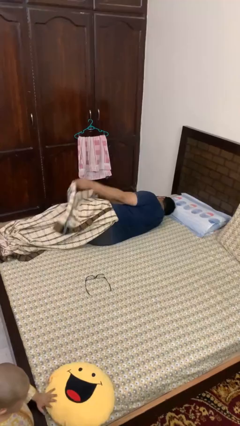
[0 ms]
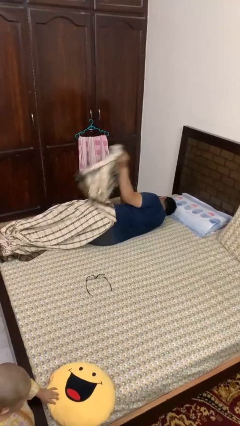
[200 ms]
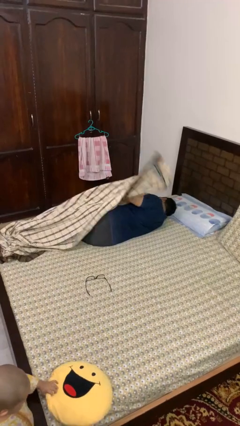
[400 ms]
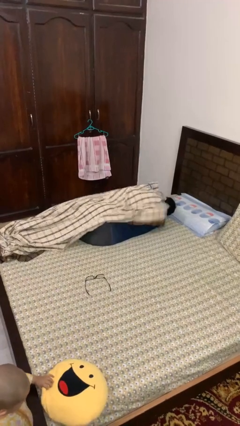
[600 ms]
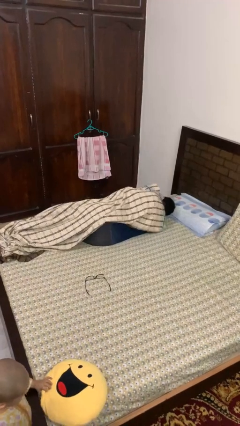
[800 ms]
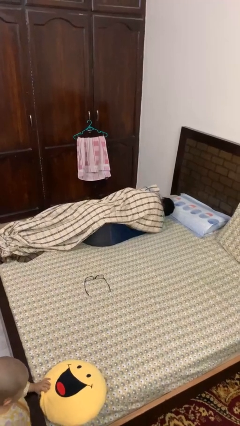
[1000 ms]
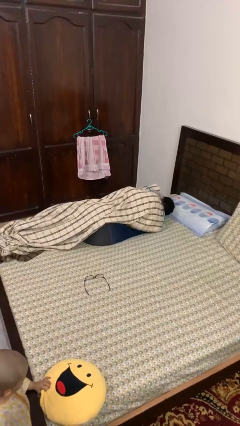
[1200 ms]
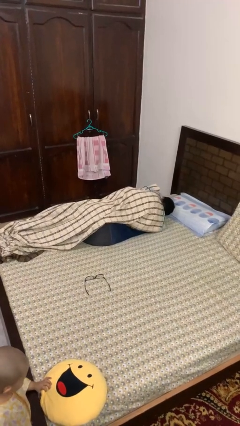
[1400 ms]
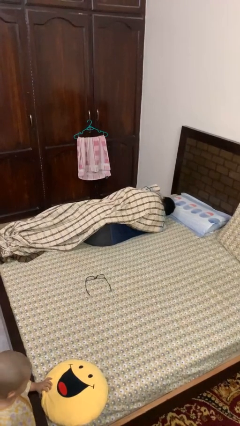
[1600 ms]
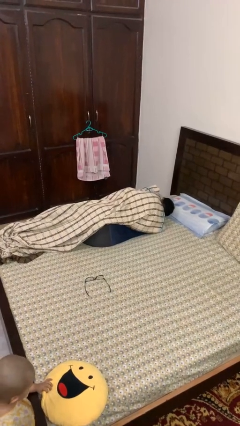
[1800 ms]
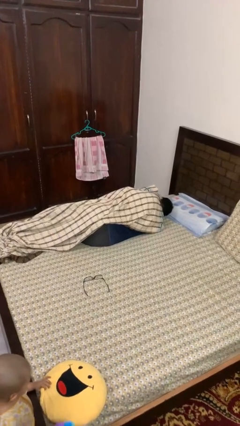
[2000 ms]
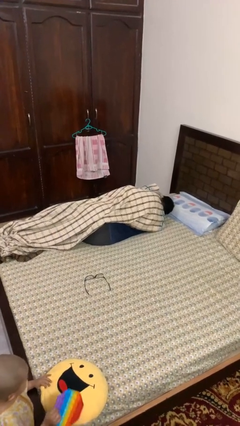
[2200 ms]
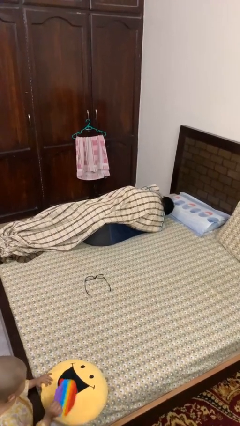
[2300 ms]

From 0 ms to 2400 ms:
person covers with blanket

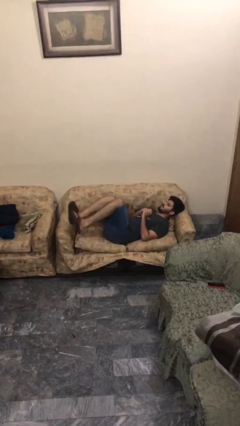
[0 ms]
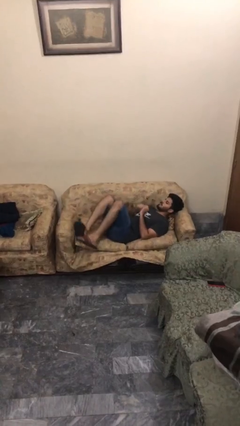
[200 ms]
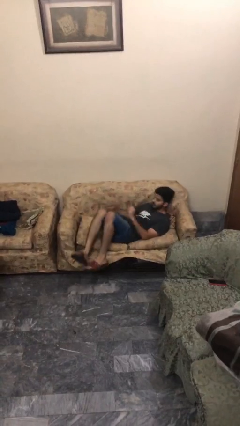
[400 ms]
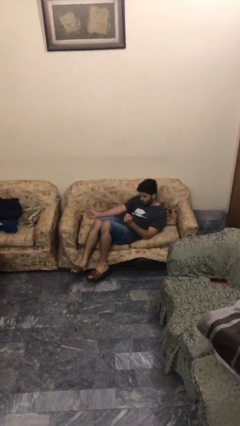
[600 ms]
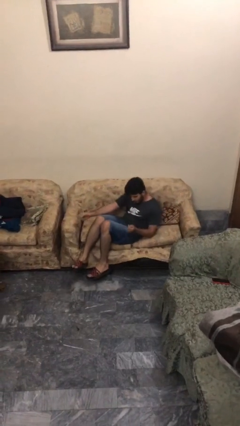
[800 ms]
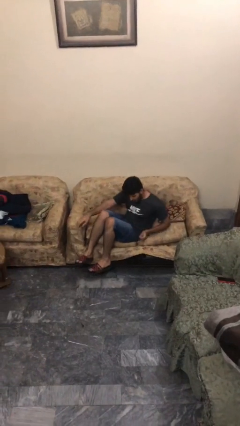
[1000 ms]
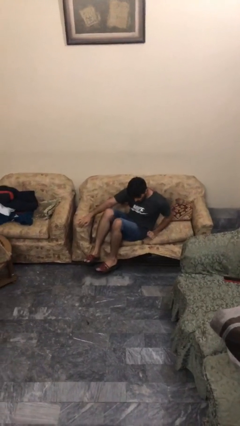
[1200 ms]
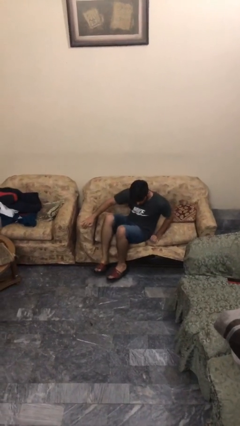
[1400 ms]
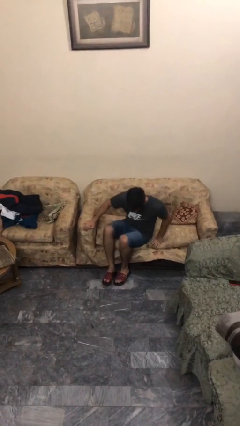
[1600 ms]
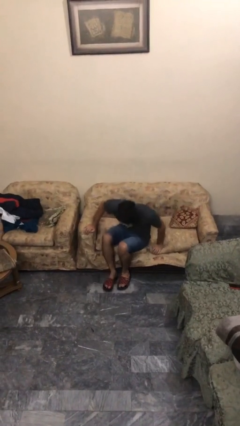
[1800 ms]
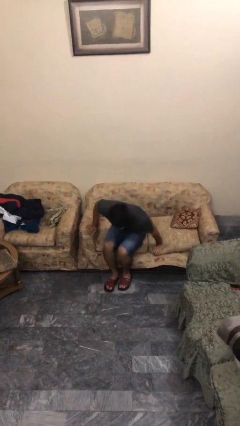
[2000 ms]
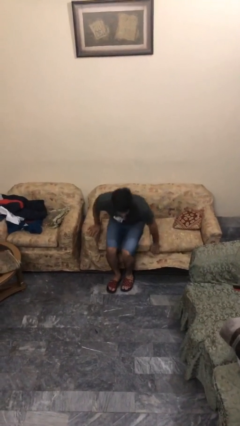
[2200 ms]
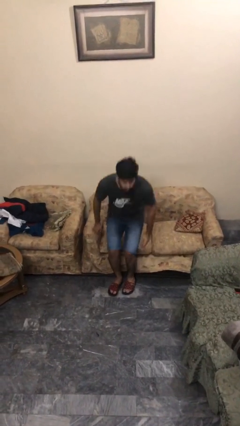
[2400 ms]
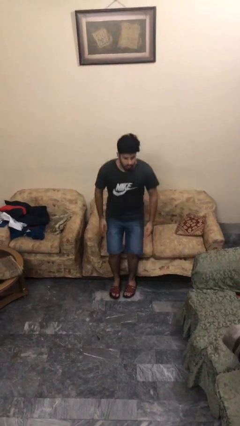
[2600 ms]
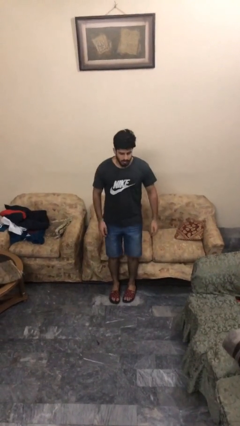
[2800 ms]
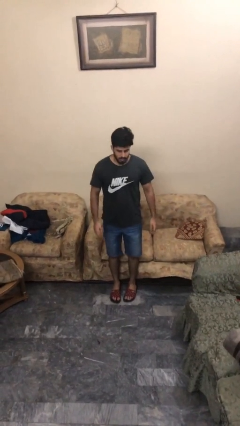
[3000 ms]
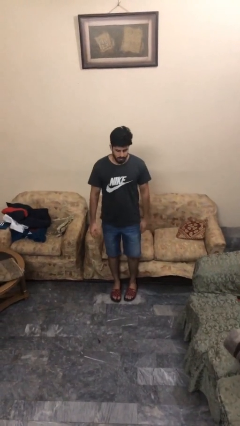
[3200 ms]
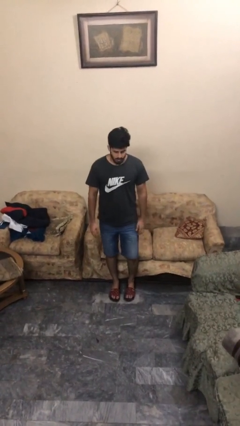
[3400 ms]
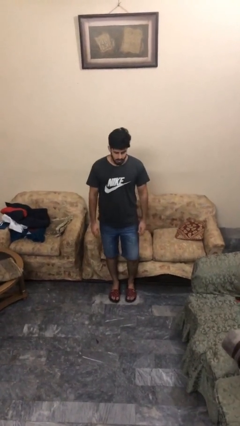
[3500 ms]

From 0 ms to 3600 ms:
person stands up

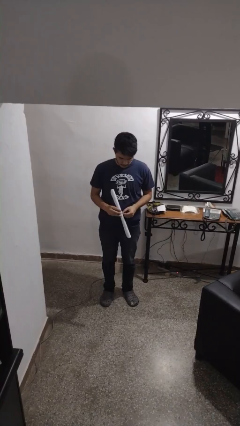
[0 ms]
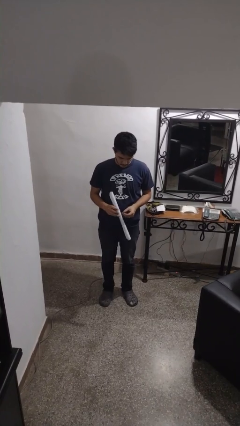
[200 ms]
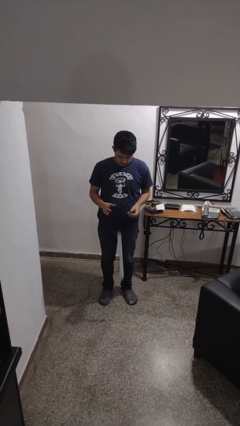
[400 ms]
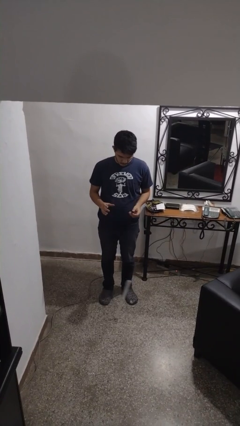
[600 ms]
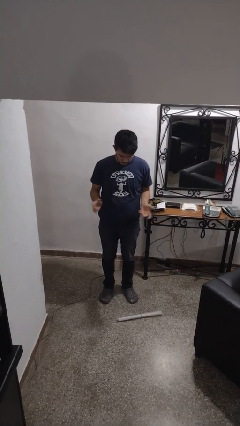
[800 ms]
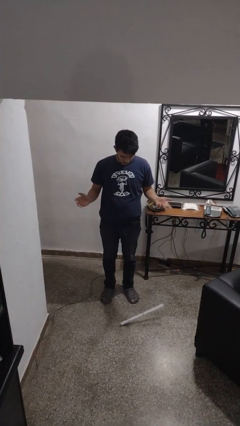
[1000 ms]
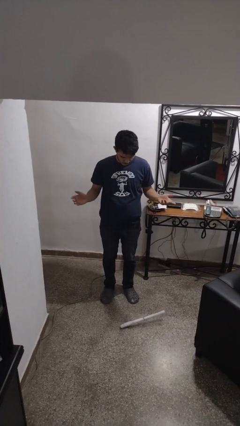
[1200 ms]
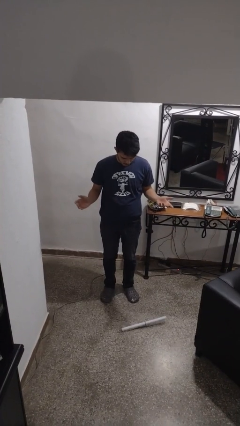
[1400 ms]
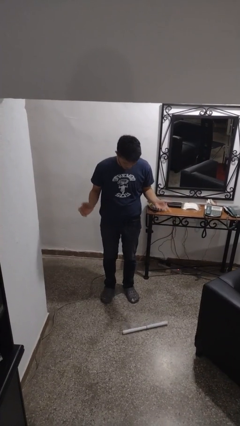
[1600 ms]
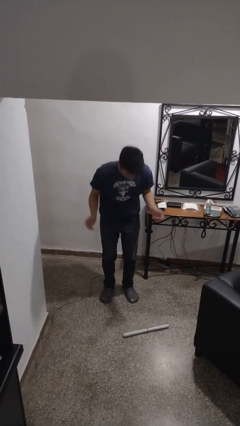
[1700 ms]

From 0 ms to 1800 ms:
person drops object

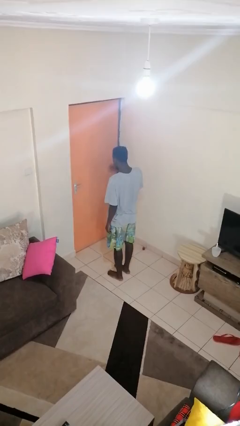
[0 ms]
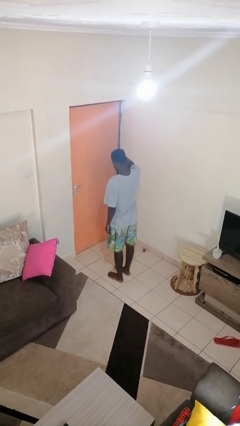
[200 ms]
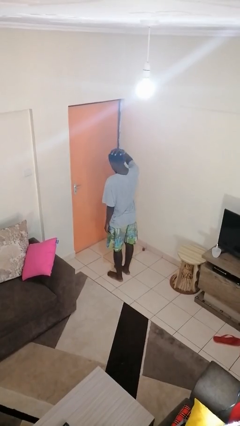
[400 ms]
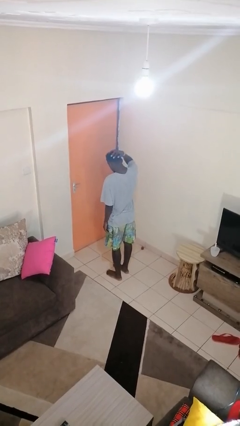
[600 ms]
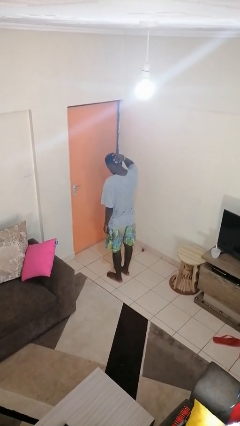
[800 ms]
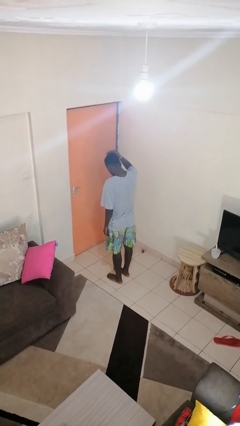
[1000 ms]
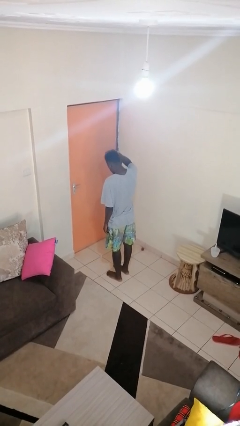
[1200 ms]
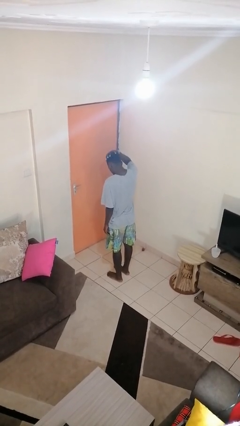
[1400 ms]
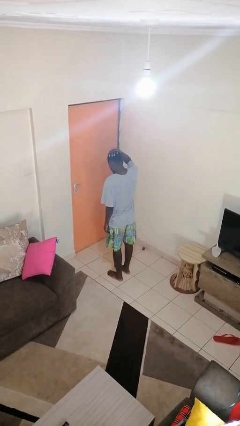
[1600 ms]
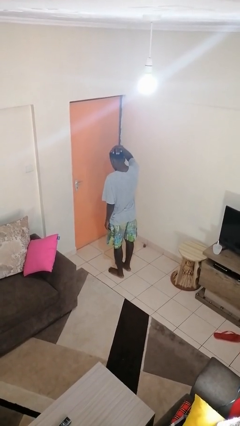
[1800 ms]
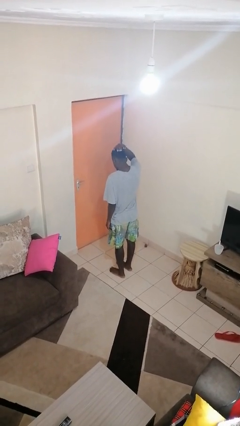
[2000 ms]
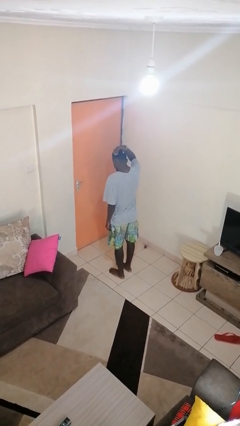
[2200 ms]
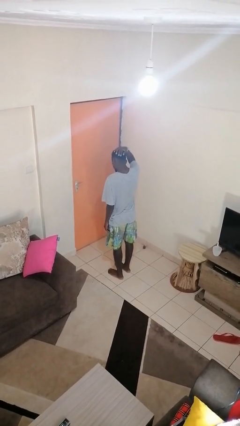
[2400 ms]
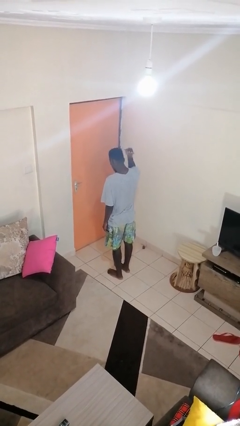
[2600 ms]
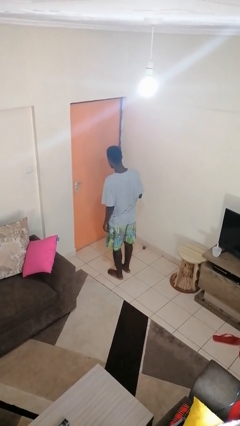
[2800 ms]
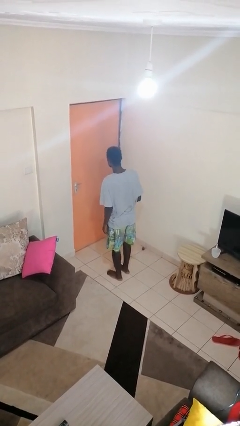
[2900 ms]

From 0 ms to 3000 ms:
person strokes hair

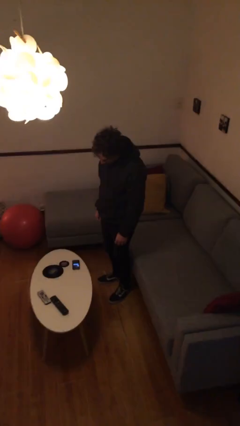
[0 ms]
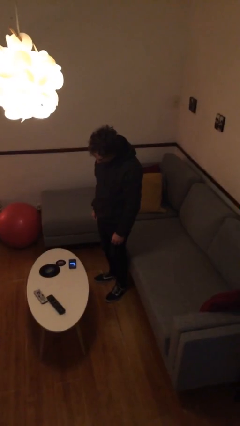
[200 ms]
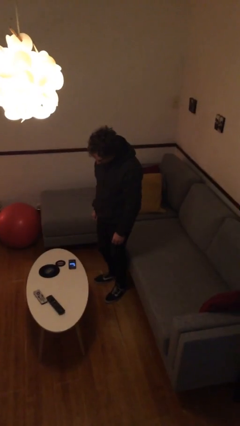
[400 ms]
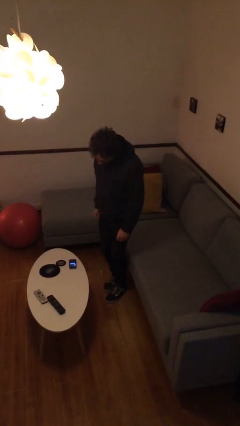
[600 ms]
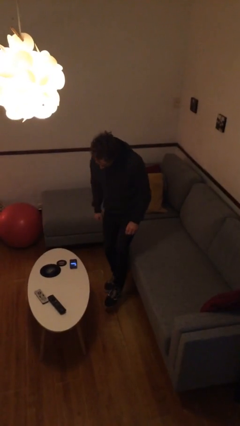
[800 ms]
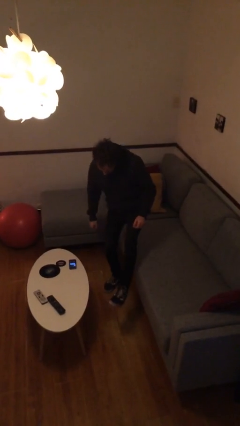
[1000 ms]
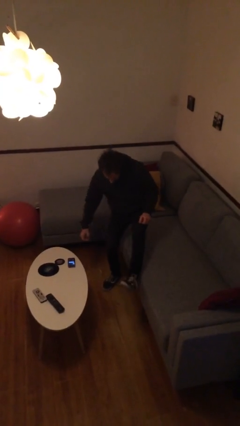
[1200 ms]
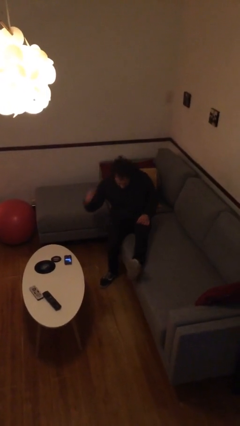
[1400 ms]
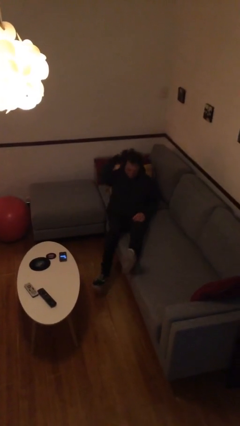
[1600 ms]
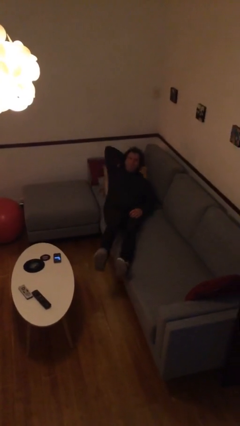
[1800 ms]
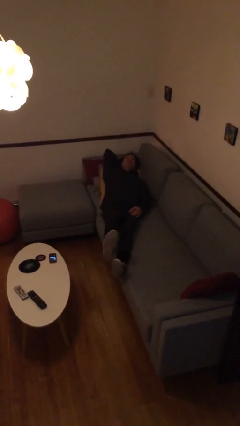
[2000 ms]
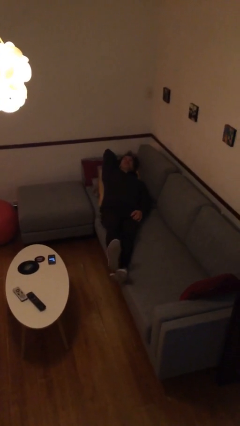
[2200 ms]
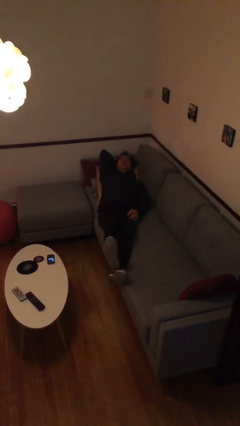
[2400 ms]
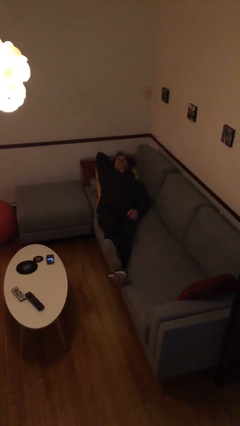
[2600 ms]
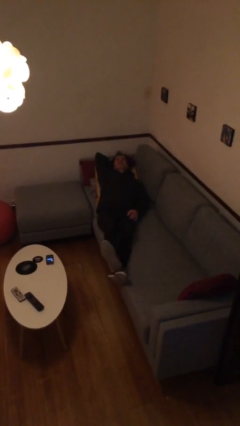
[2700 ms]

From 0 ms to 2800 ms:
person lies down on couch

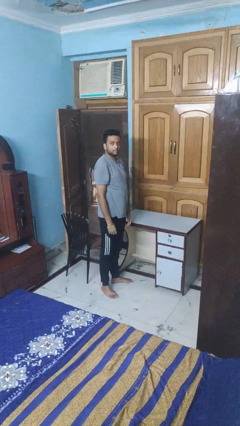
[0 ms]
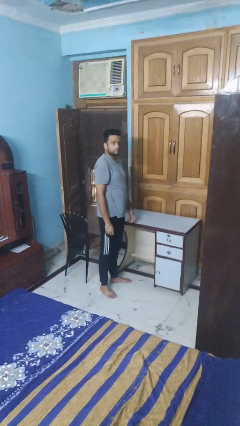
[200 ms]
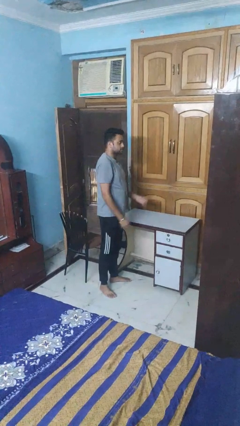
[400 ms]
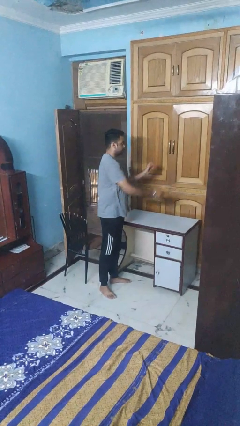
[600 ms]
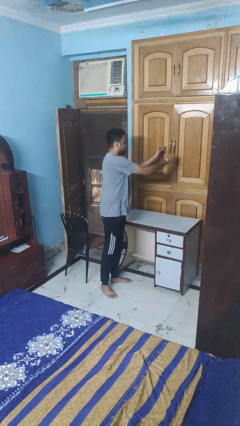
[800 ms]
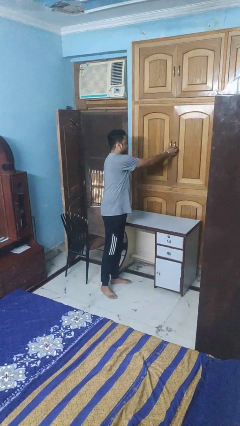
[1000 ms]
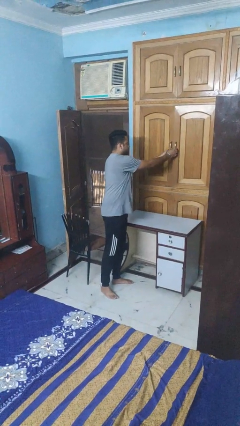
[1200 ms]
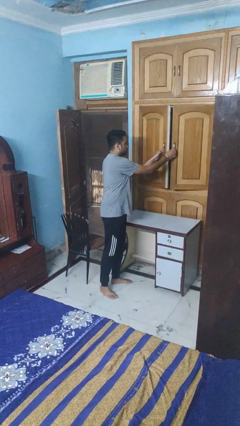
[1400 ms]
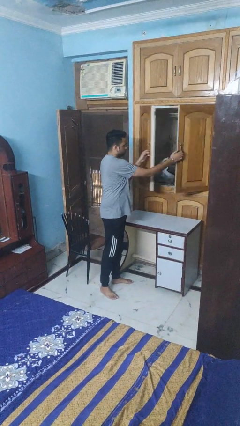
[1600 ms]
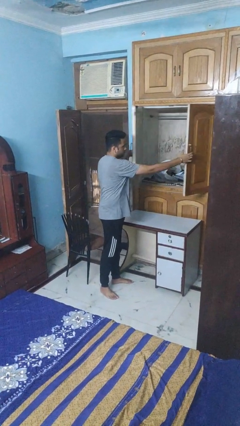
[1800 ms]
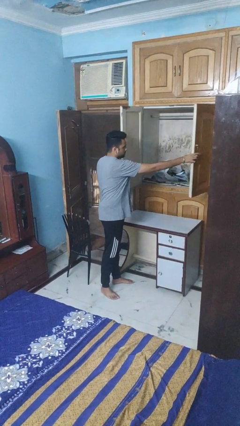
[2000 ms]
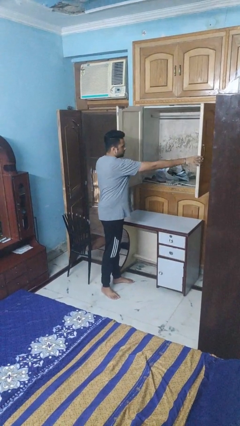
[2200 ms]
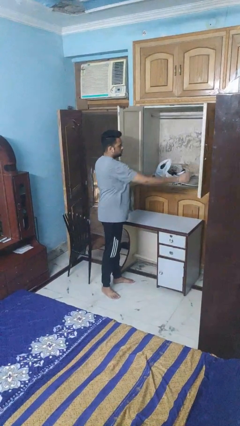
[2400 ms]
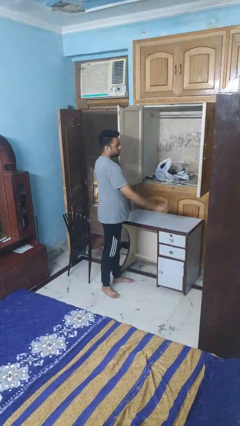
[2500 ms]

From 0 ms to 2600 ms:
person opens closet door

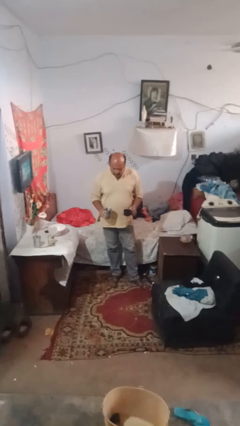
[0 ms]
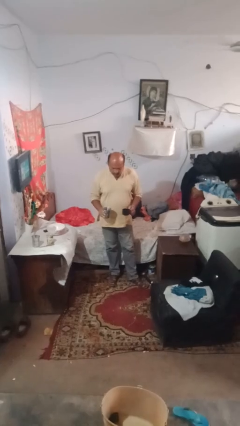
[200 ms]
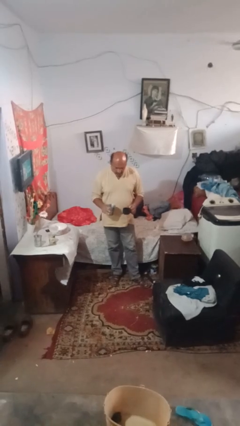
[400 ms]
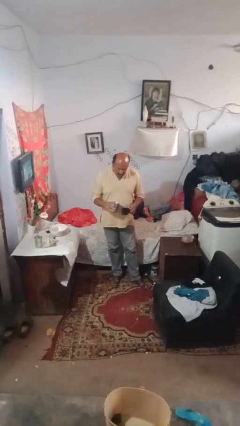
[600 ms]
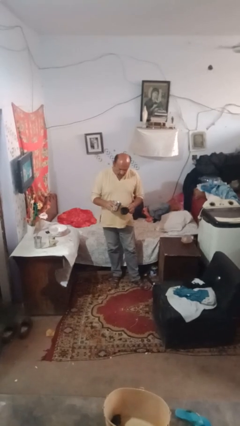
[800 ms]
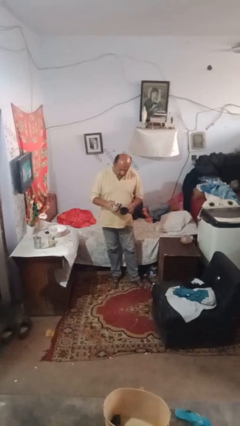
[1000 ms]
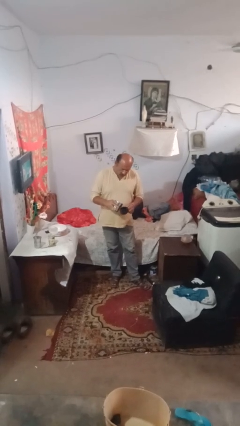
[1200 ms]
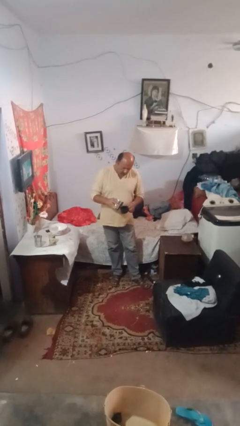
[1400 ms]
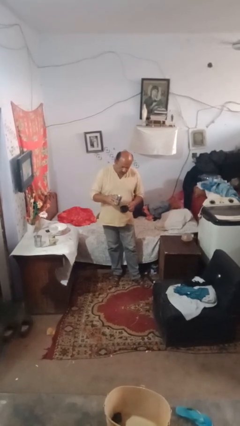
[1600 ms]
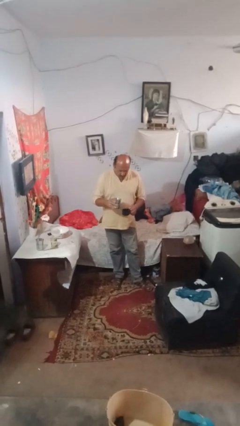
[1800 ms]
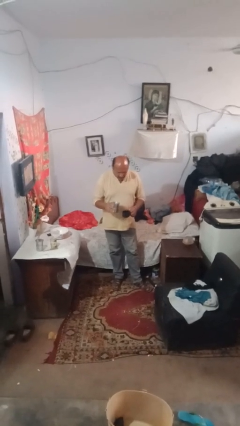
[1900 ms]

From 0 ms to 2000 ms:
person pours liquid into cup
